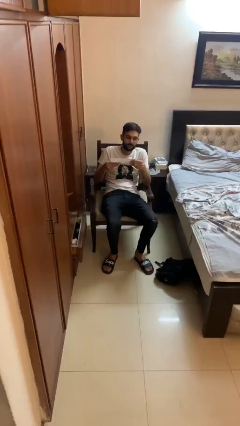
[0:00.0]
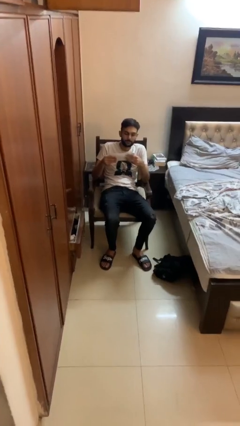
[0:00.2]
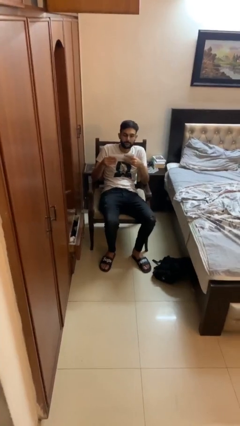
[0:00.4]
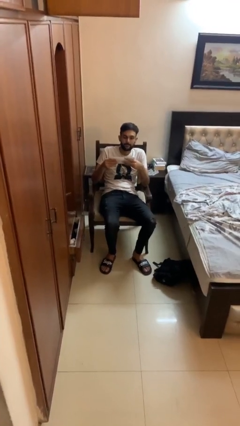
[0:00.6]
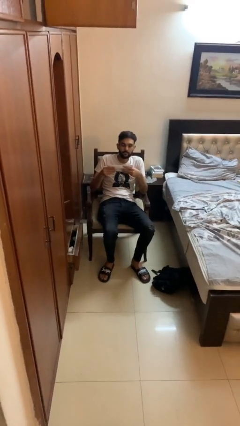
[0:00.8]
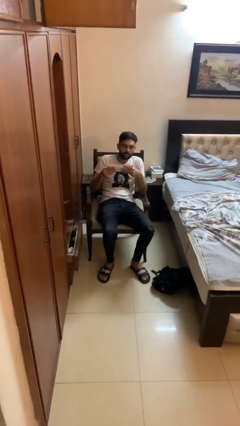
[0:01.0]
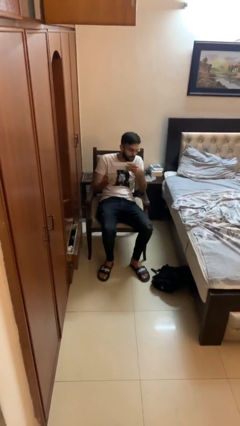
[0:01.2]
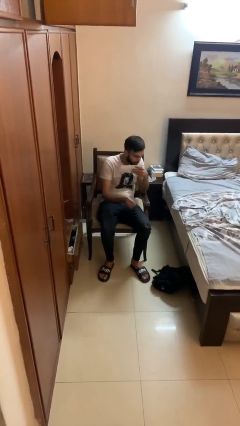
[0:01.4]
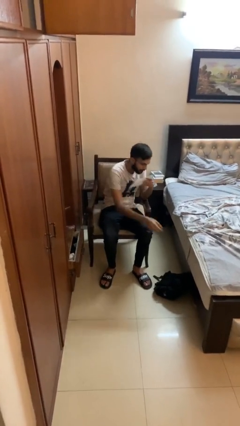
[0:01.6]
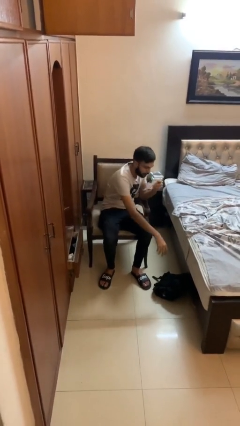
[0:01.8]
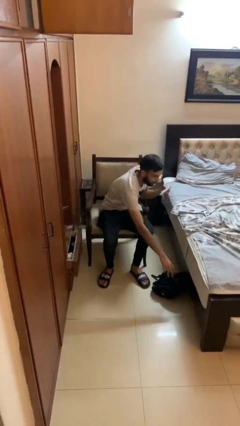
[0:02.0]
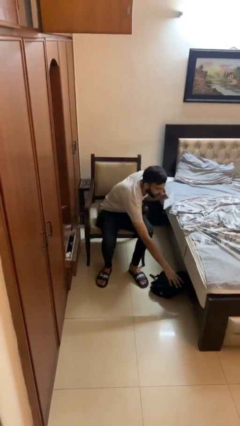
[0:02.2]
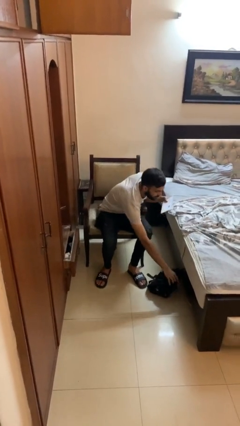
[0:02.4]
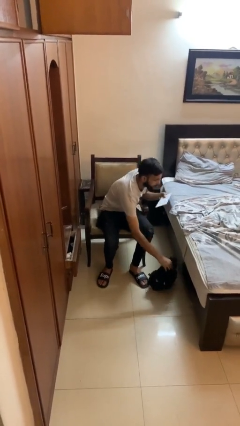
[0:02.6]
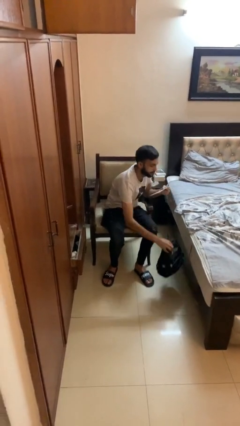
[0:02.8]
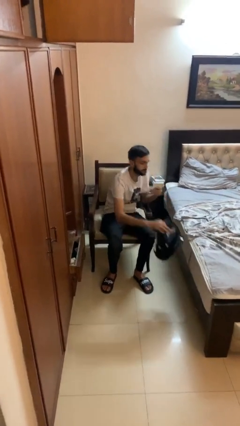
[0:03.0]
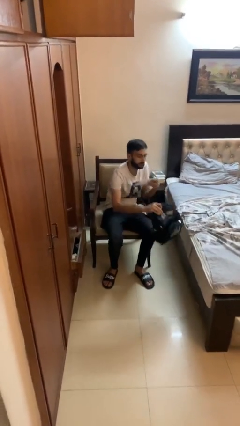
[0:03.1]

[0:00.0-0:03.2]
person picks up object from floor

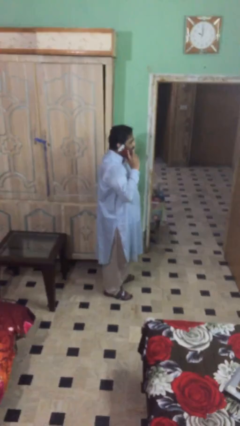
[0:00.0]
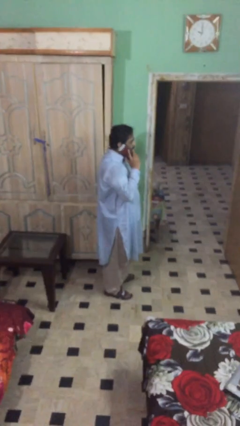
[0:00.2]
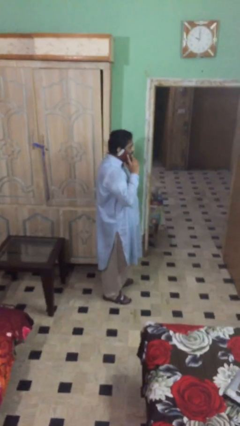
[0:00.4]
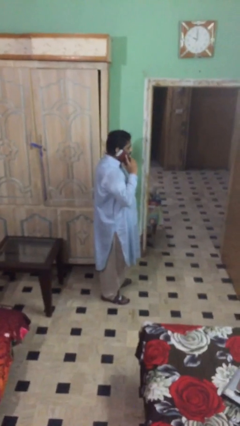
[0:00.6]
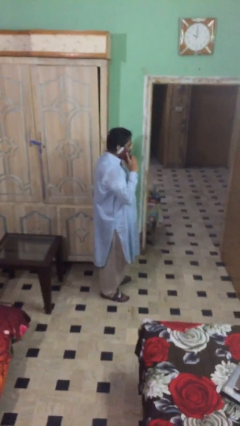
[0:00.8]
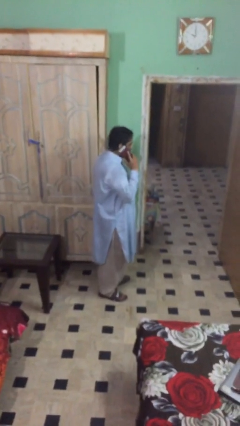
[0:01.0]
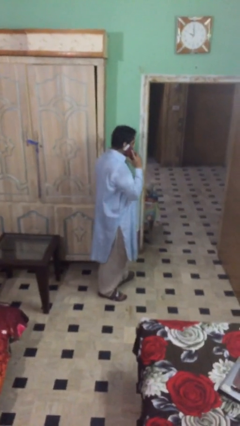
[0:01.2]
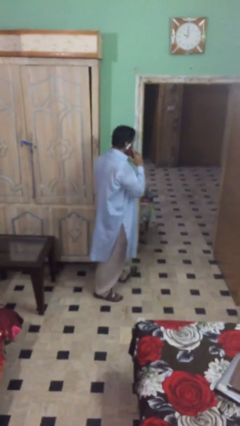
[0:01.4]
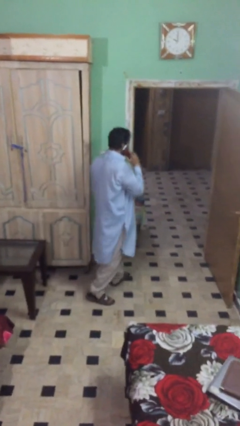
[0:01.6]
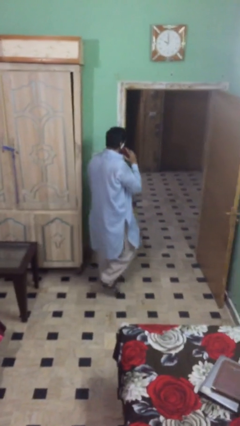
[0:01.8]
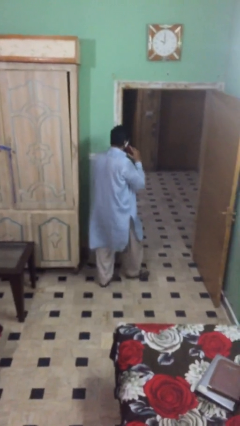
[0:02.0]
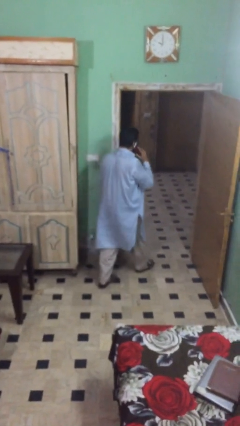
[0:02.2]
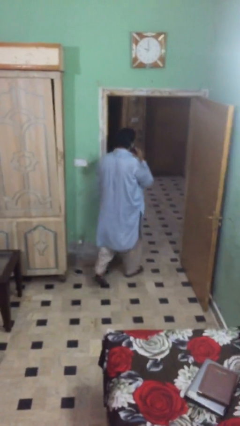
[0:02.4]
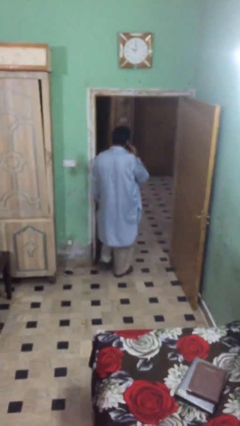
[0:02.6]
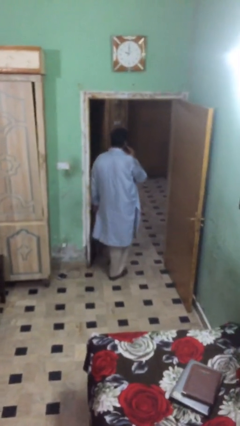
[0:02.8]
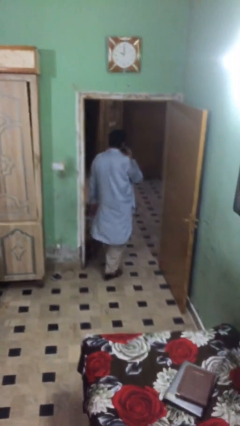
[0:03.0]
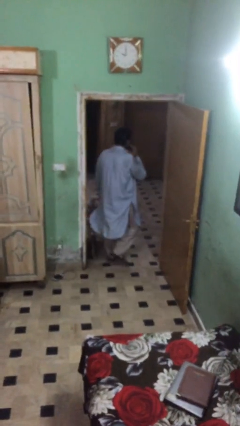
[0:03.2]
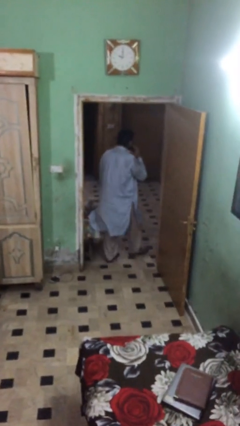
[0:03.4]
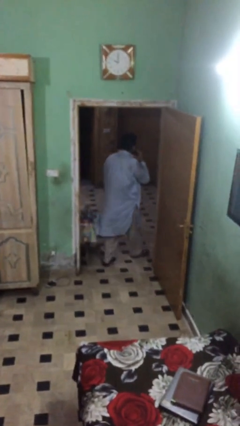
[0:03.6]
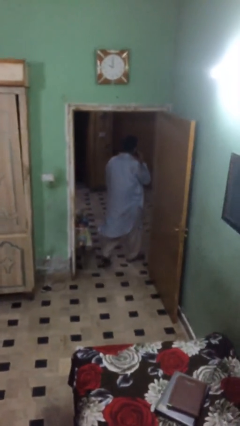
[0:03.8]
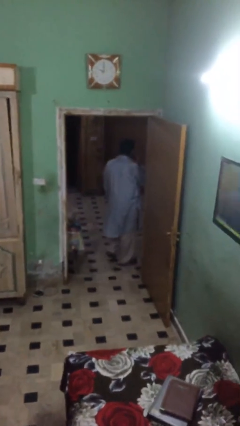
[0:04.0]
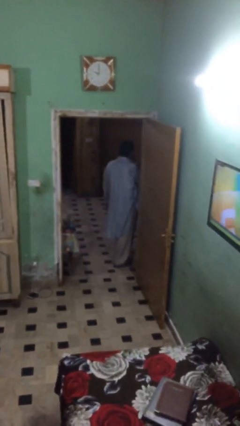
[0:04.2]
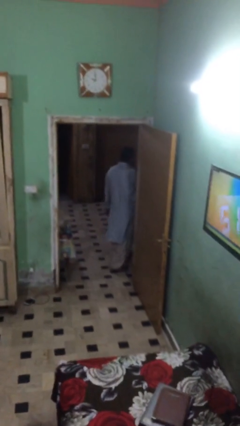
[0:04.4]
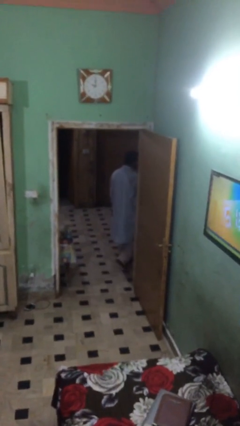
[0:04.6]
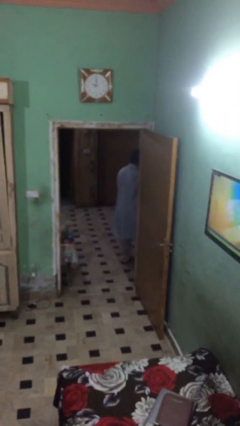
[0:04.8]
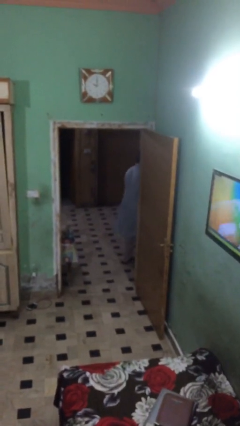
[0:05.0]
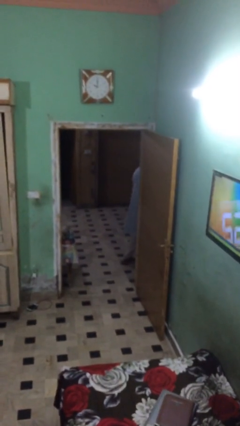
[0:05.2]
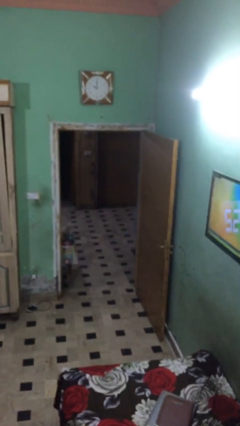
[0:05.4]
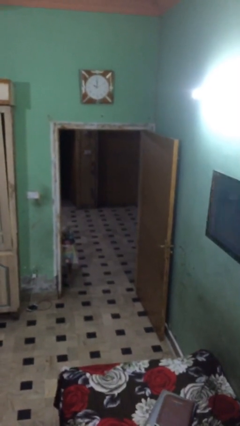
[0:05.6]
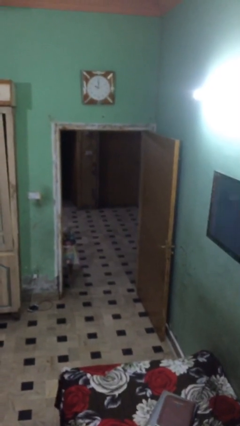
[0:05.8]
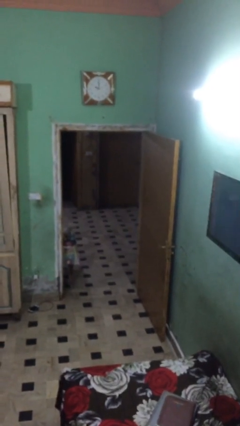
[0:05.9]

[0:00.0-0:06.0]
person exits scene through structure

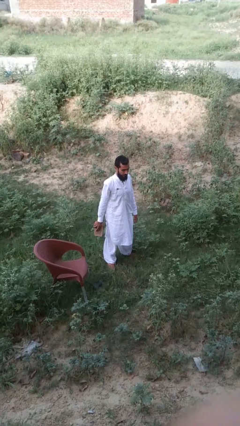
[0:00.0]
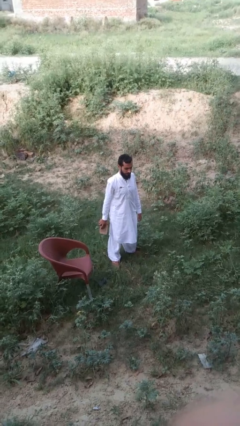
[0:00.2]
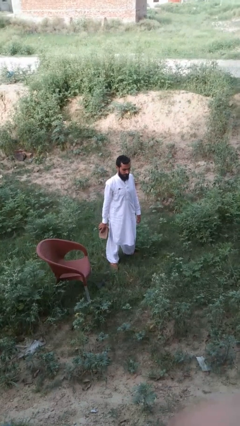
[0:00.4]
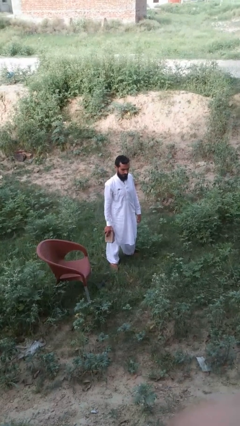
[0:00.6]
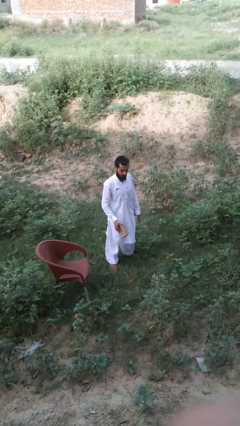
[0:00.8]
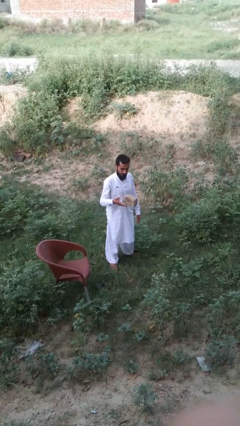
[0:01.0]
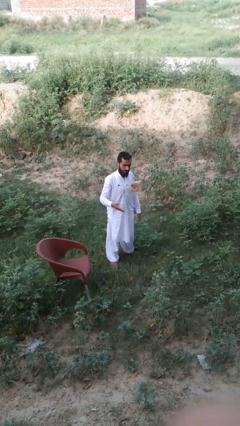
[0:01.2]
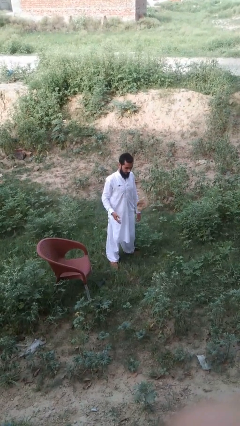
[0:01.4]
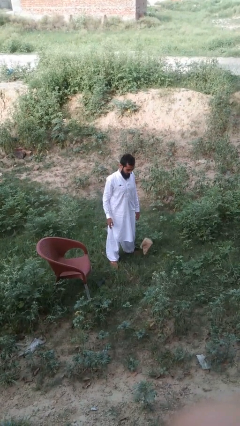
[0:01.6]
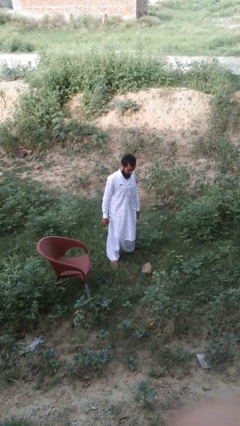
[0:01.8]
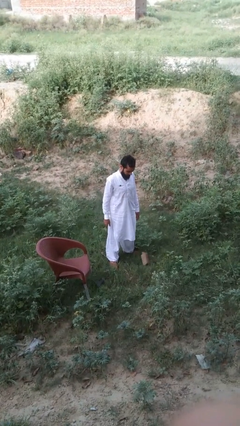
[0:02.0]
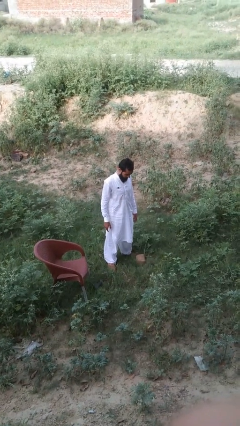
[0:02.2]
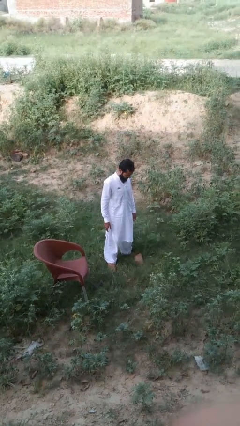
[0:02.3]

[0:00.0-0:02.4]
person throws object to ground

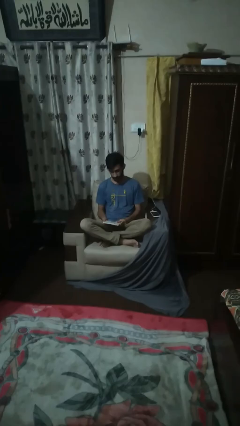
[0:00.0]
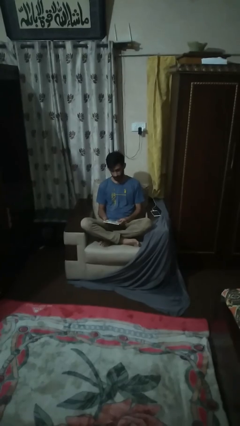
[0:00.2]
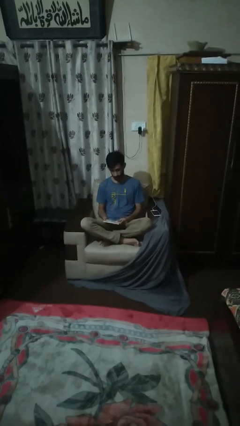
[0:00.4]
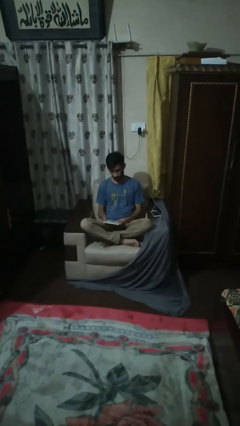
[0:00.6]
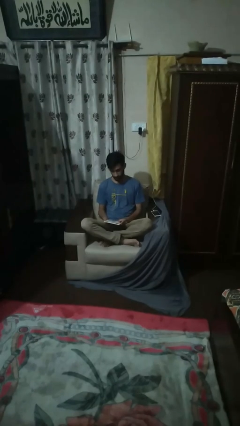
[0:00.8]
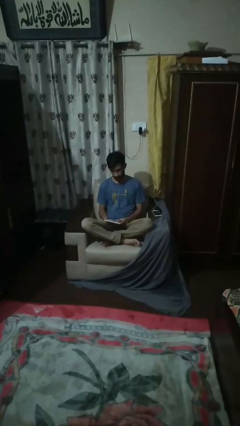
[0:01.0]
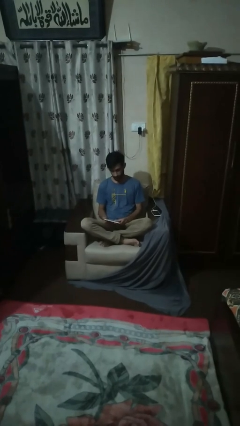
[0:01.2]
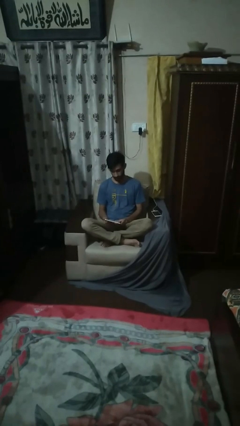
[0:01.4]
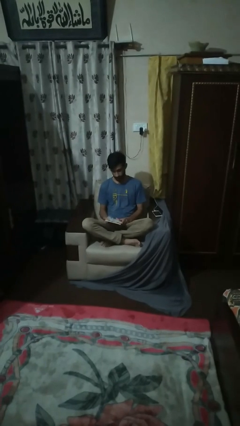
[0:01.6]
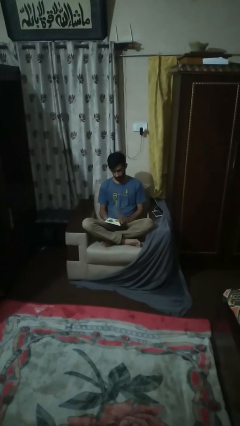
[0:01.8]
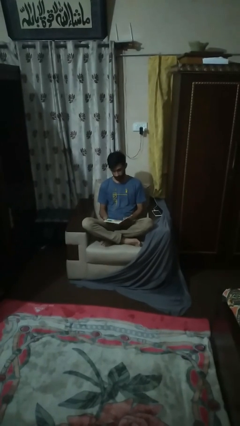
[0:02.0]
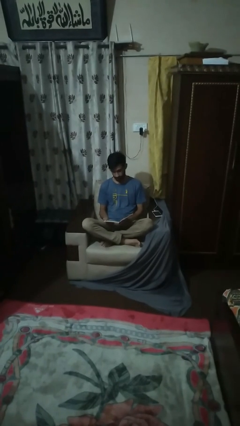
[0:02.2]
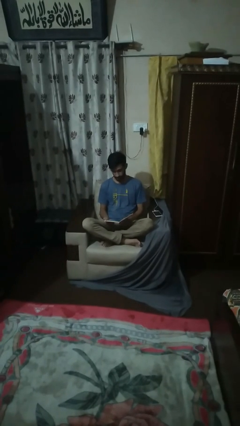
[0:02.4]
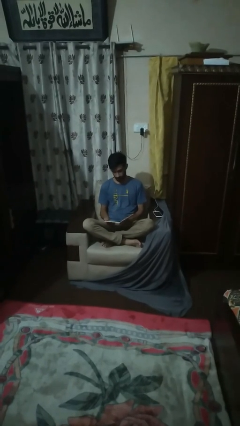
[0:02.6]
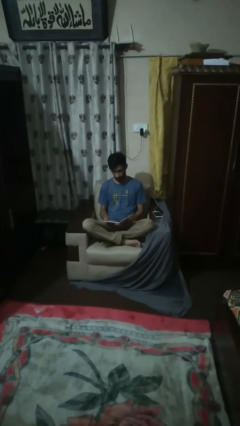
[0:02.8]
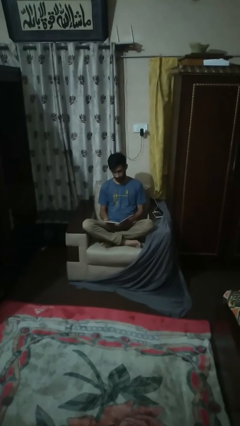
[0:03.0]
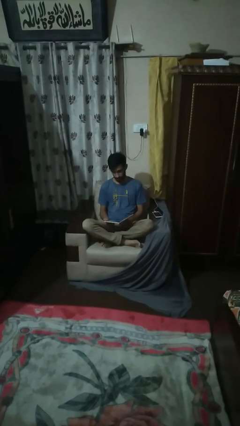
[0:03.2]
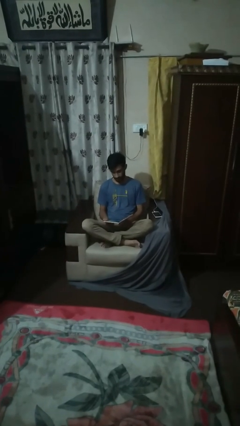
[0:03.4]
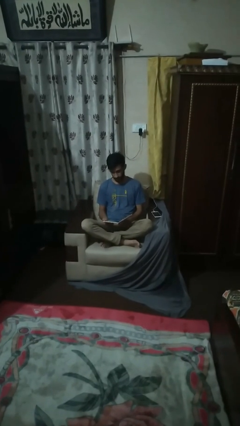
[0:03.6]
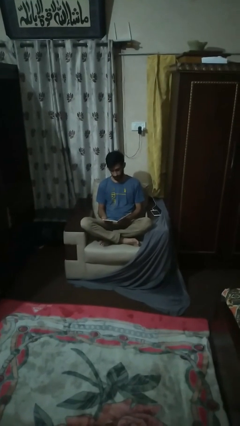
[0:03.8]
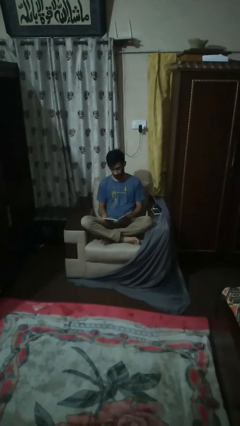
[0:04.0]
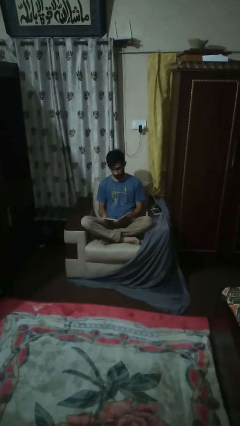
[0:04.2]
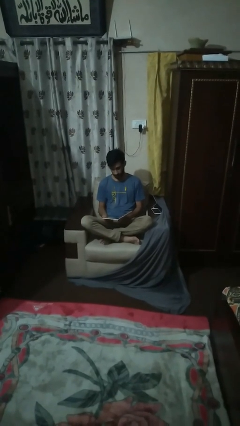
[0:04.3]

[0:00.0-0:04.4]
person reads book

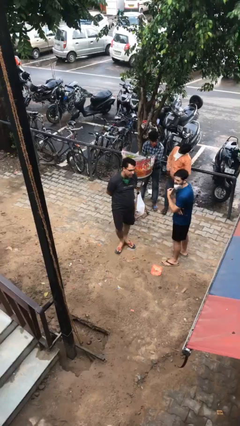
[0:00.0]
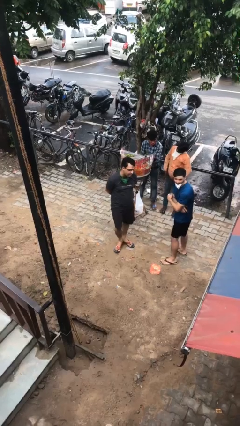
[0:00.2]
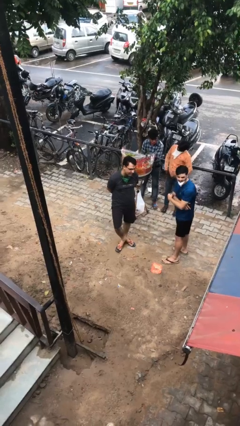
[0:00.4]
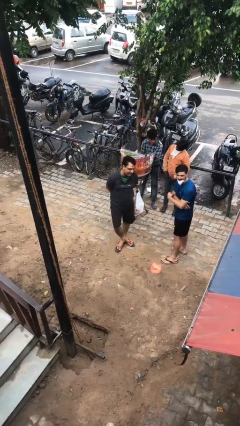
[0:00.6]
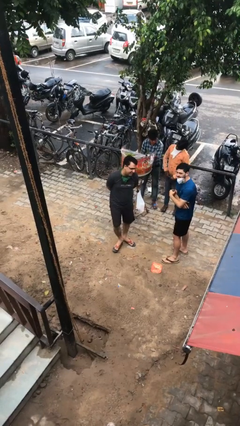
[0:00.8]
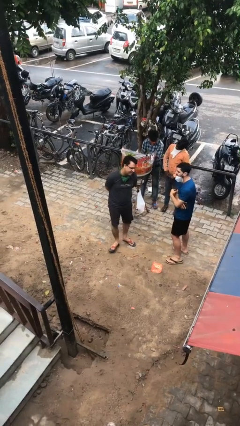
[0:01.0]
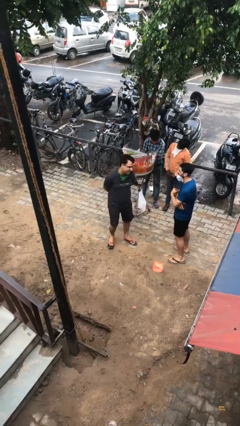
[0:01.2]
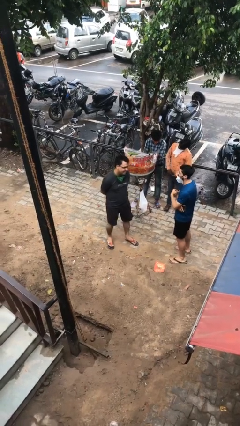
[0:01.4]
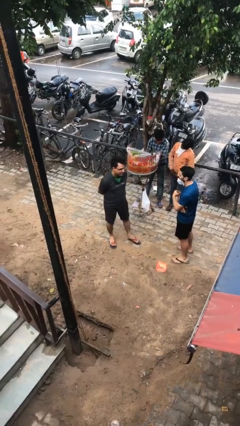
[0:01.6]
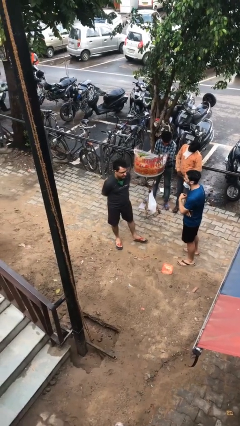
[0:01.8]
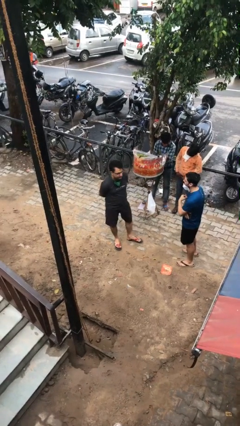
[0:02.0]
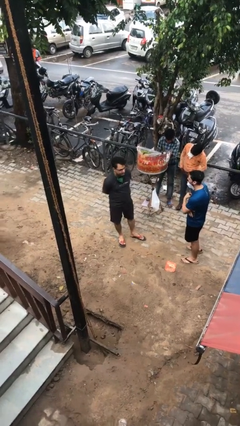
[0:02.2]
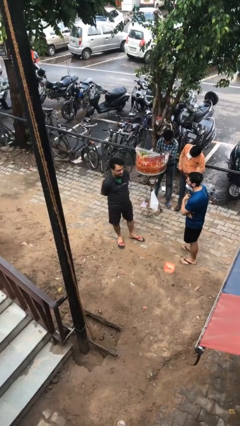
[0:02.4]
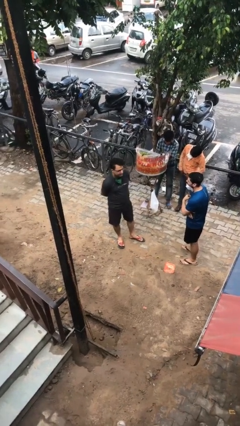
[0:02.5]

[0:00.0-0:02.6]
person laughs with person
